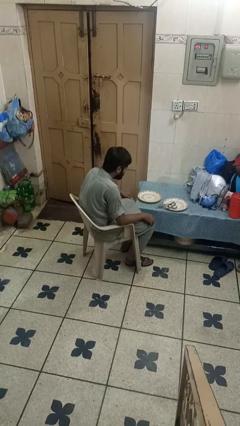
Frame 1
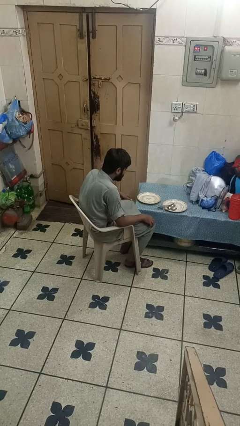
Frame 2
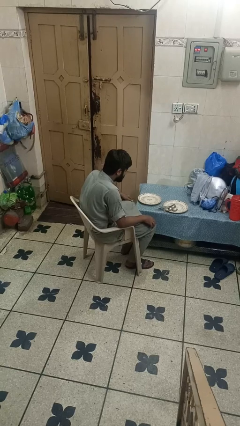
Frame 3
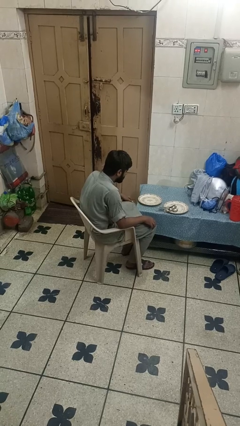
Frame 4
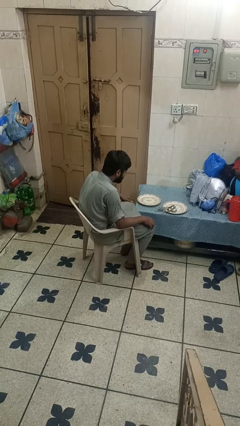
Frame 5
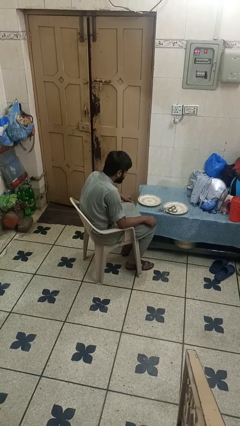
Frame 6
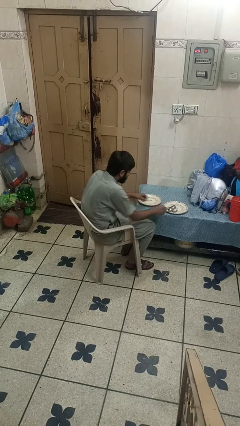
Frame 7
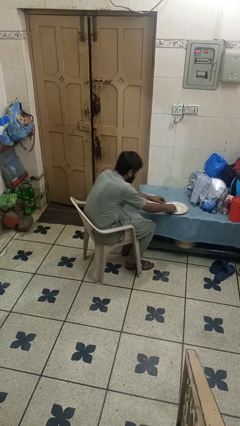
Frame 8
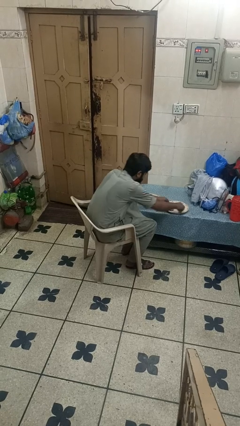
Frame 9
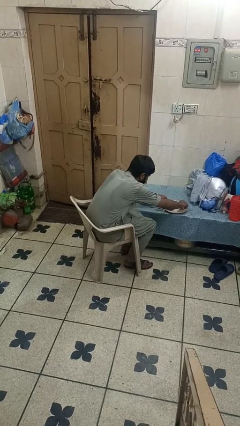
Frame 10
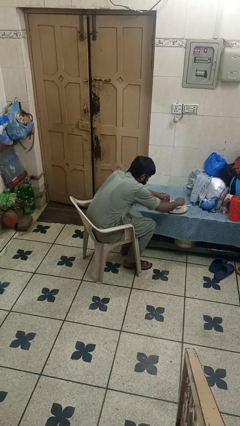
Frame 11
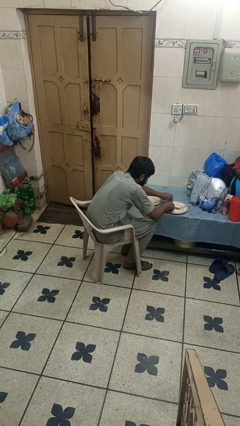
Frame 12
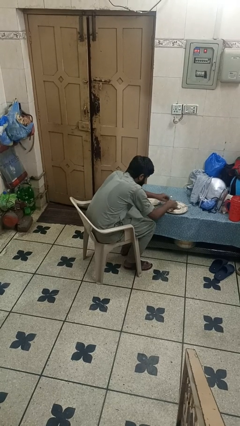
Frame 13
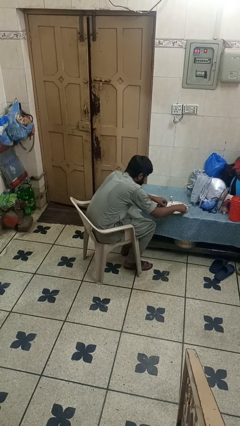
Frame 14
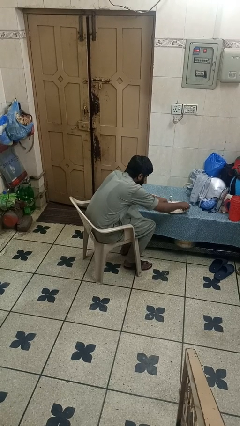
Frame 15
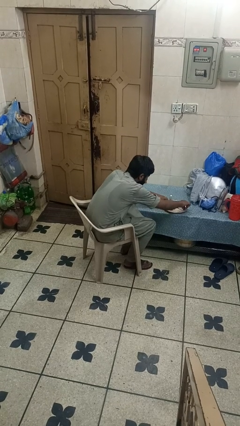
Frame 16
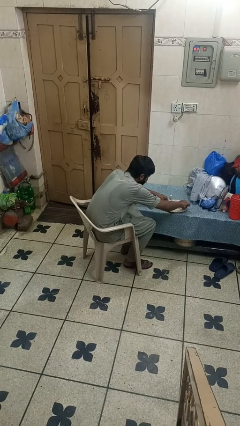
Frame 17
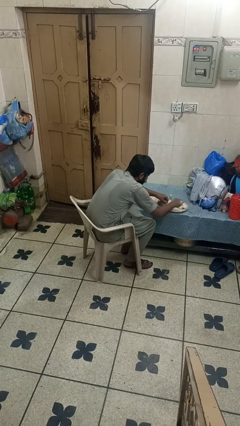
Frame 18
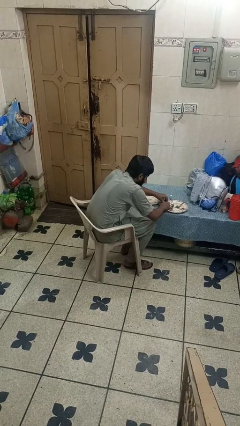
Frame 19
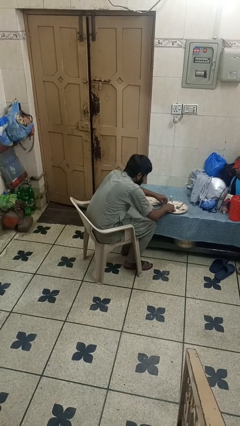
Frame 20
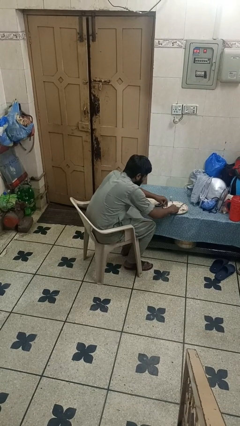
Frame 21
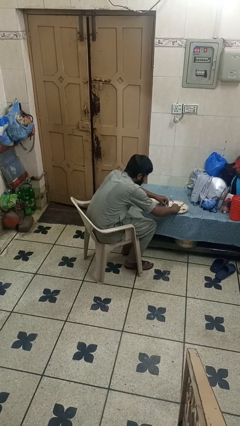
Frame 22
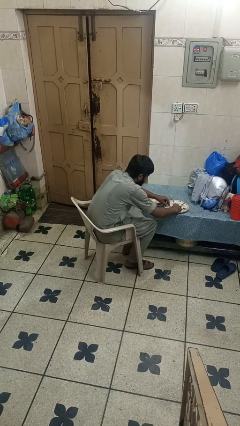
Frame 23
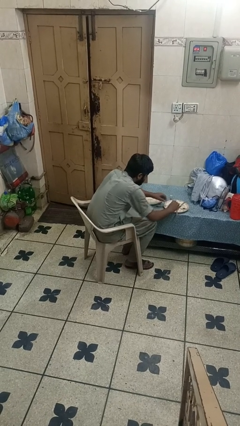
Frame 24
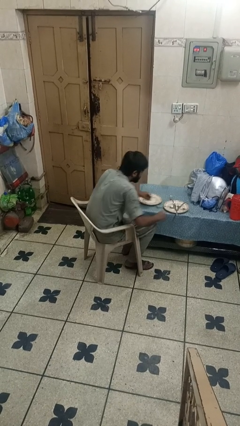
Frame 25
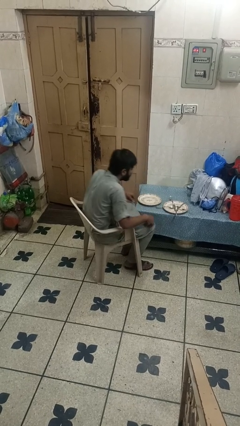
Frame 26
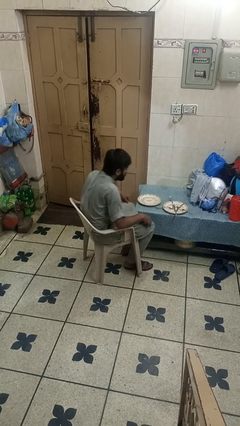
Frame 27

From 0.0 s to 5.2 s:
person sets table

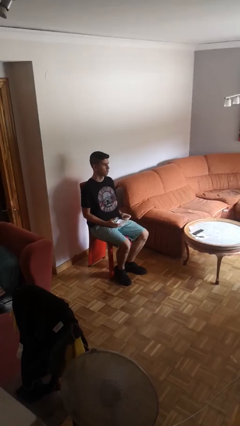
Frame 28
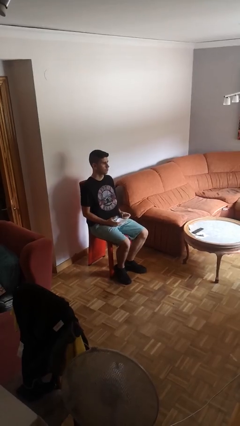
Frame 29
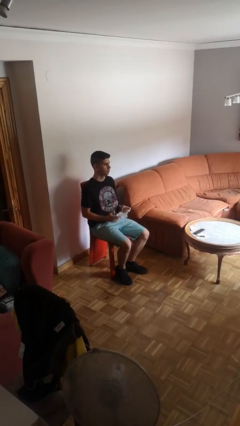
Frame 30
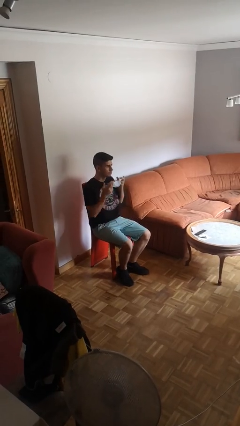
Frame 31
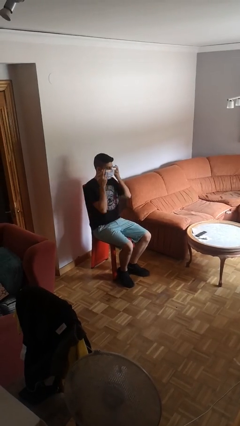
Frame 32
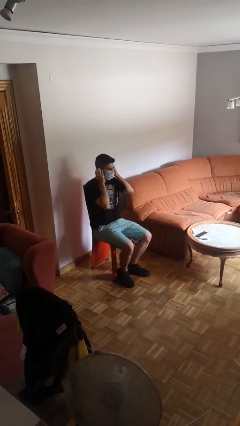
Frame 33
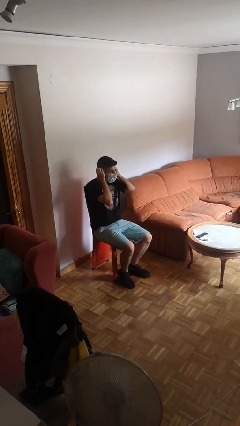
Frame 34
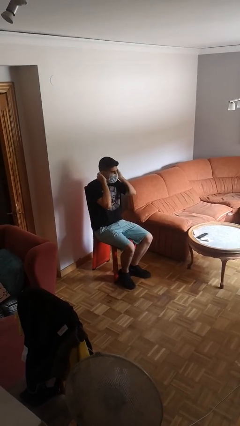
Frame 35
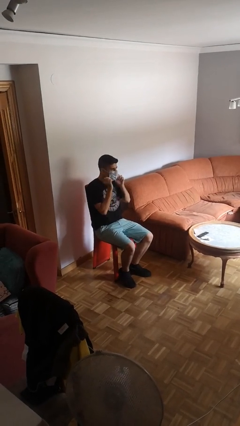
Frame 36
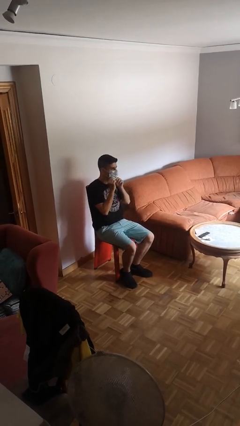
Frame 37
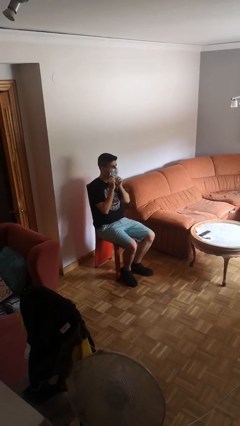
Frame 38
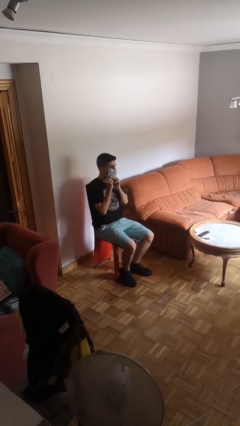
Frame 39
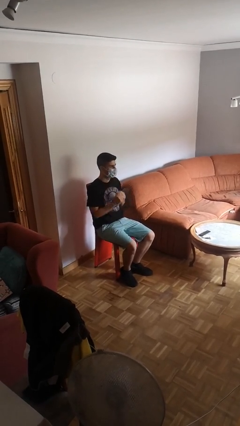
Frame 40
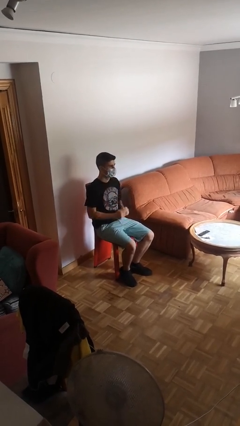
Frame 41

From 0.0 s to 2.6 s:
person puts on facemask

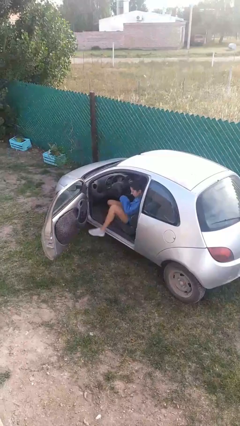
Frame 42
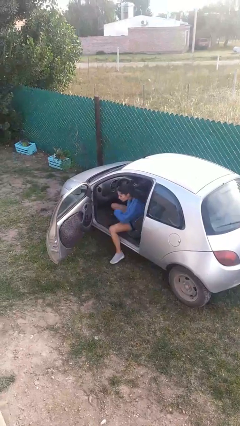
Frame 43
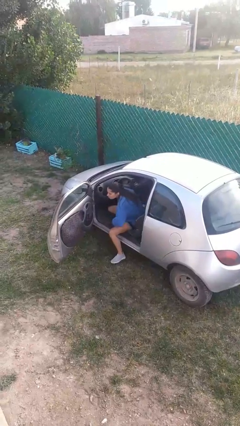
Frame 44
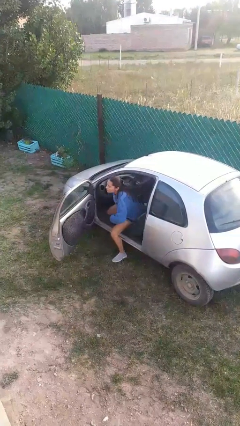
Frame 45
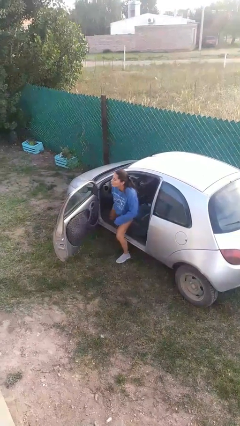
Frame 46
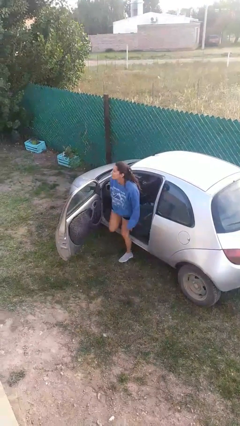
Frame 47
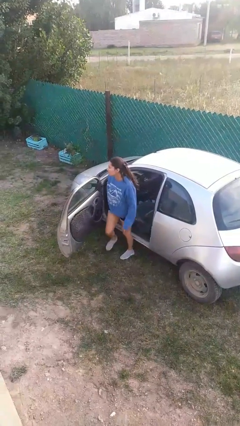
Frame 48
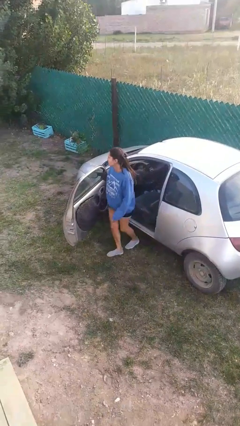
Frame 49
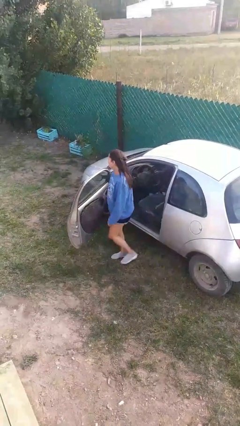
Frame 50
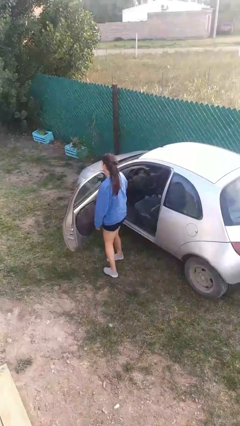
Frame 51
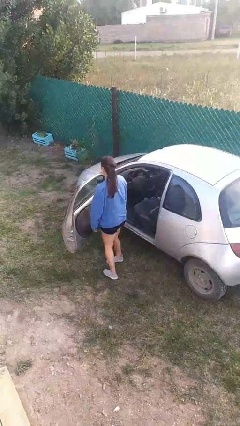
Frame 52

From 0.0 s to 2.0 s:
person exits car

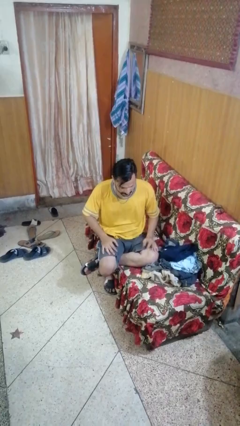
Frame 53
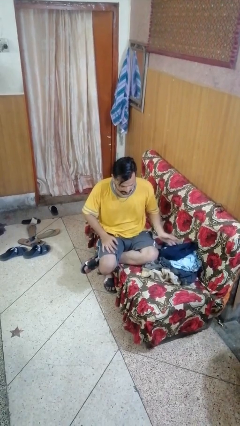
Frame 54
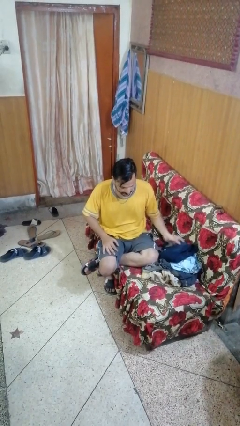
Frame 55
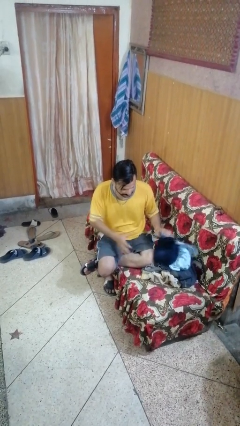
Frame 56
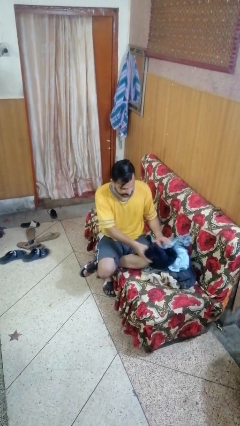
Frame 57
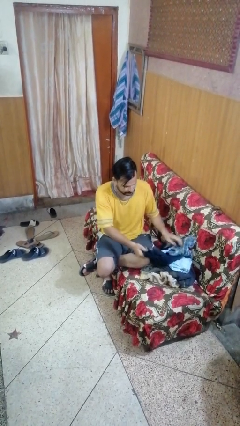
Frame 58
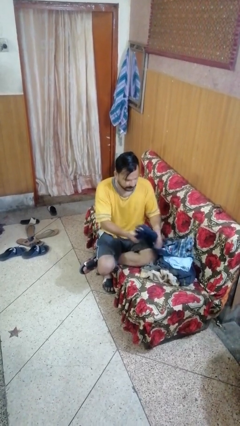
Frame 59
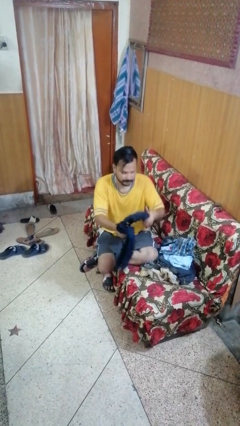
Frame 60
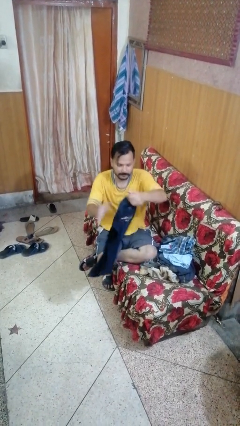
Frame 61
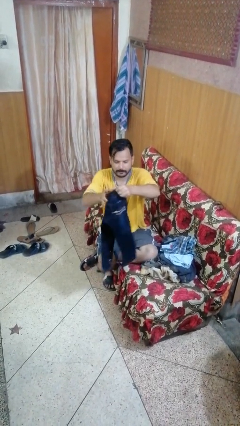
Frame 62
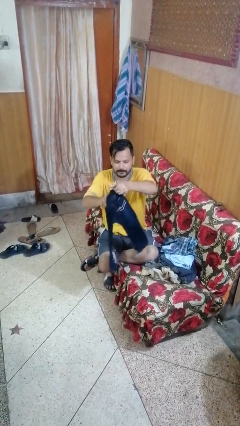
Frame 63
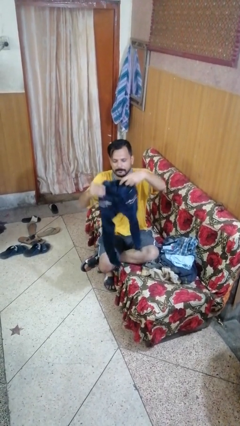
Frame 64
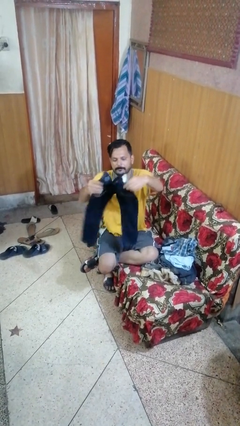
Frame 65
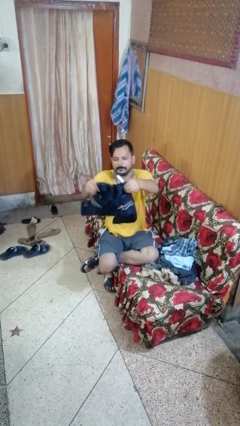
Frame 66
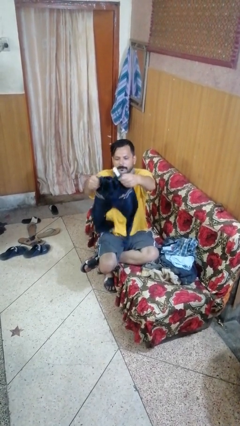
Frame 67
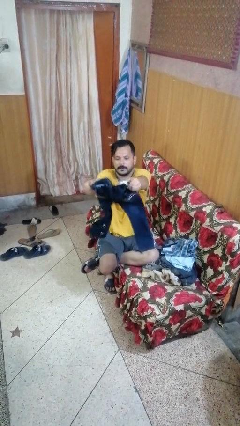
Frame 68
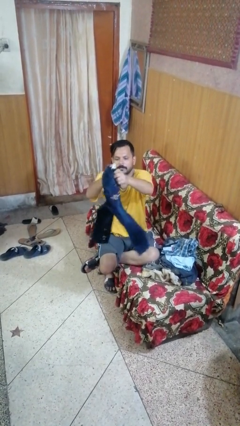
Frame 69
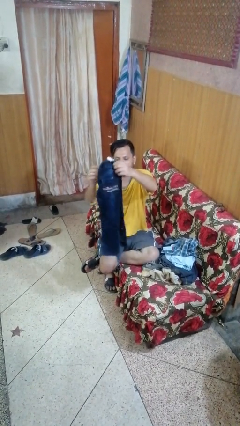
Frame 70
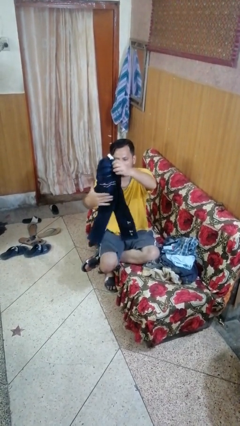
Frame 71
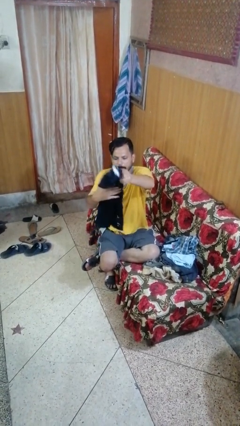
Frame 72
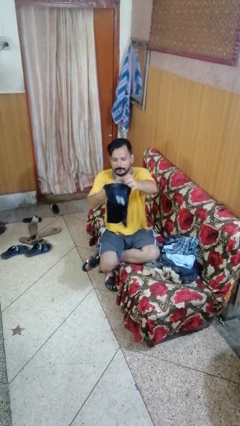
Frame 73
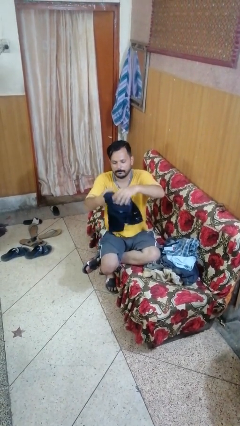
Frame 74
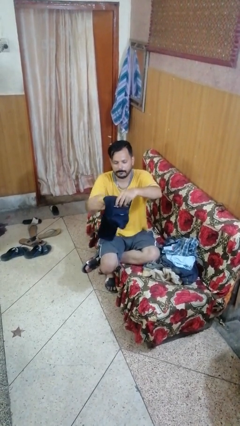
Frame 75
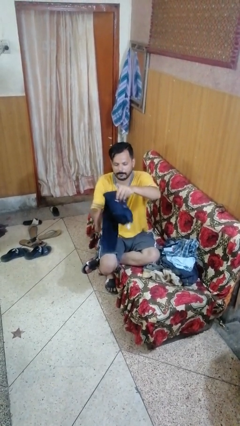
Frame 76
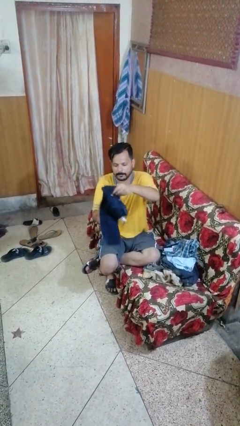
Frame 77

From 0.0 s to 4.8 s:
person folds pants

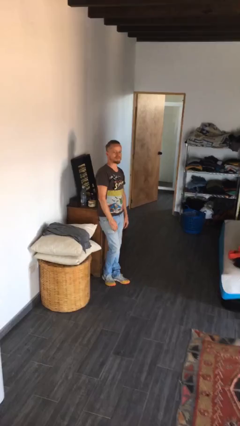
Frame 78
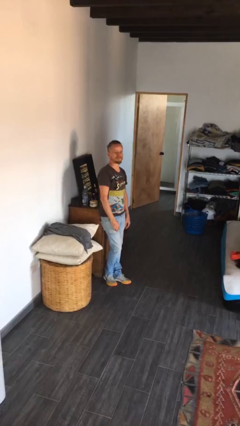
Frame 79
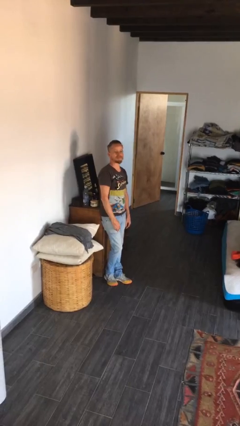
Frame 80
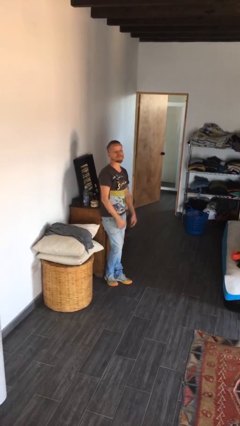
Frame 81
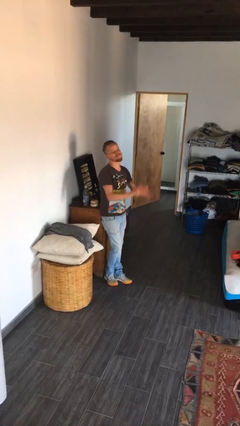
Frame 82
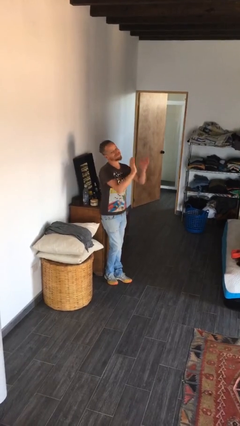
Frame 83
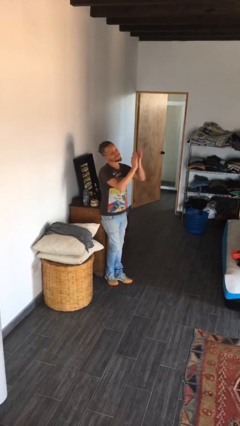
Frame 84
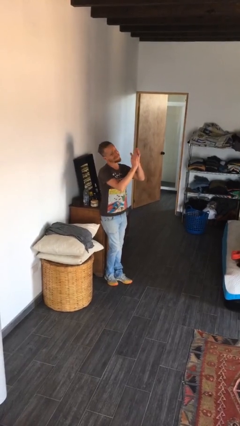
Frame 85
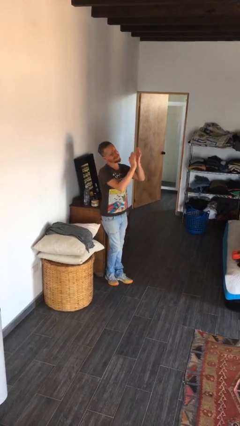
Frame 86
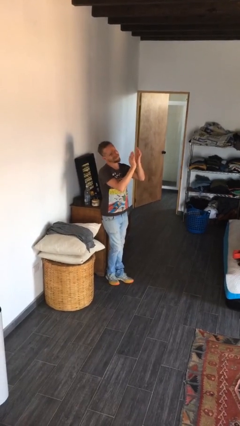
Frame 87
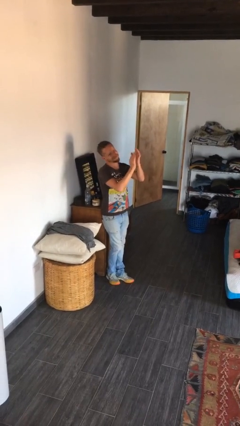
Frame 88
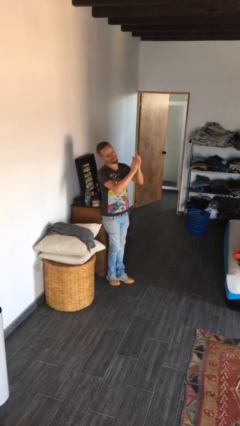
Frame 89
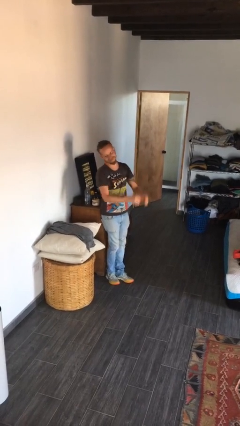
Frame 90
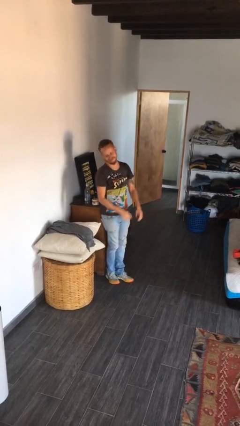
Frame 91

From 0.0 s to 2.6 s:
person claps hands

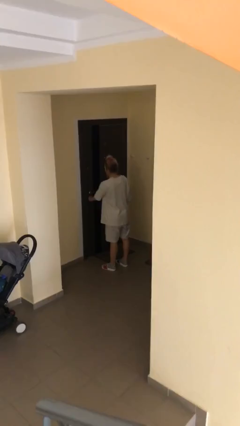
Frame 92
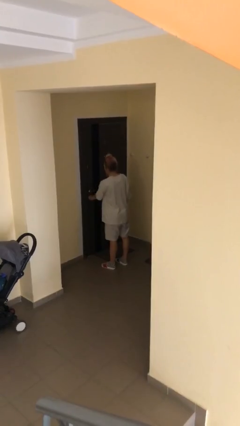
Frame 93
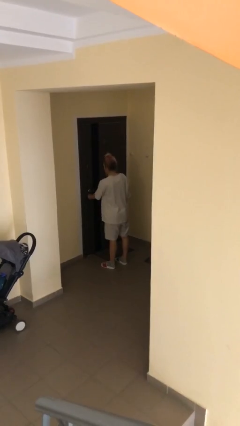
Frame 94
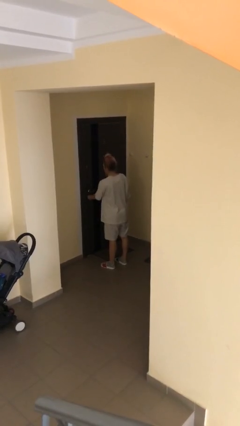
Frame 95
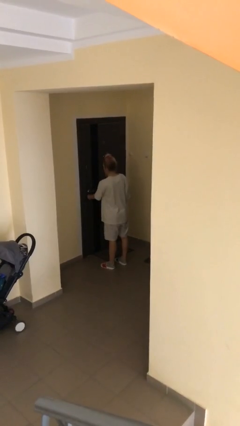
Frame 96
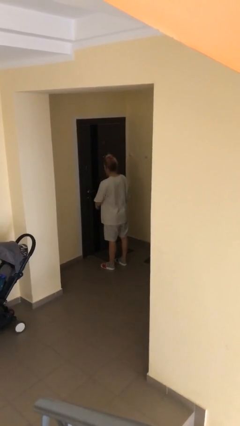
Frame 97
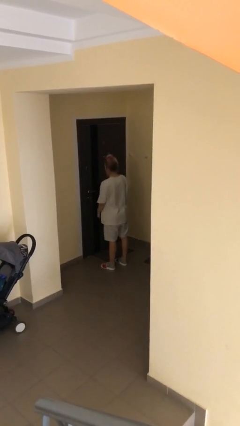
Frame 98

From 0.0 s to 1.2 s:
person locks door with keys
